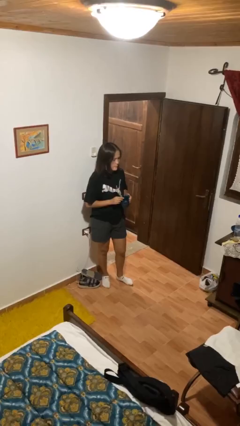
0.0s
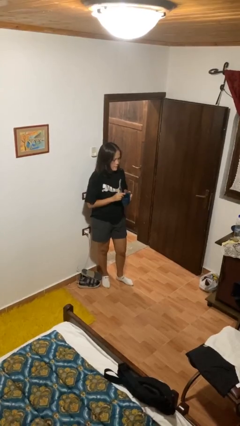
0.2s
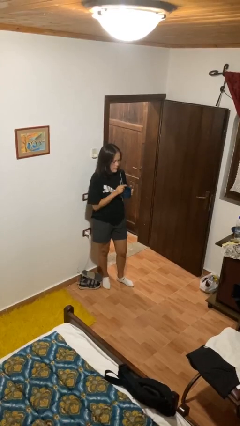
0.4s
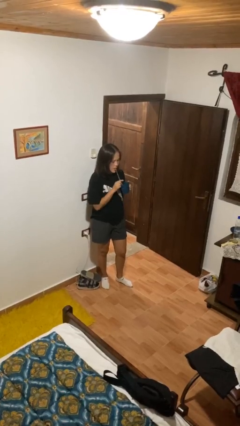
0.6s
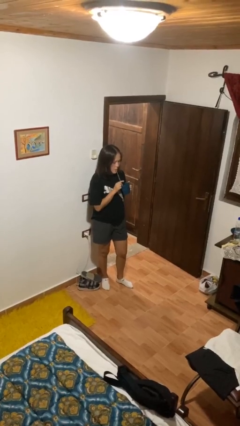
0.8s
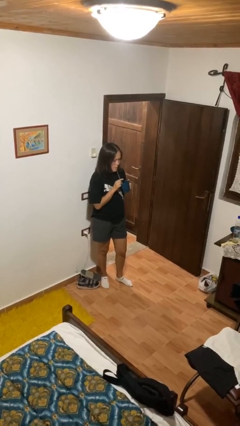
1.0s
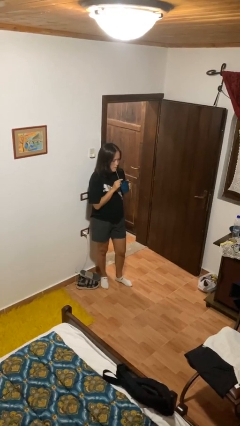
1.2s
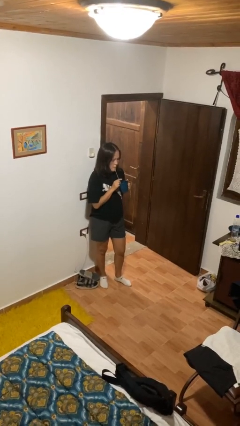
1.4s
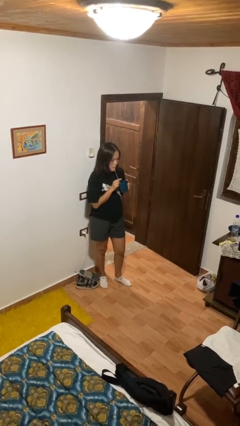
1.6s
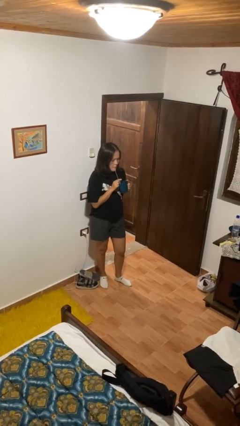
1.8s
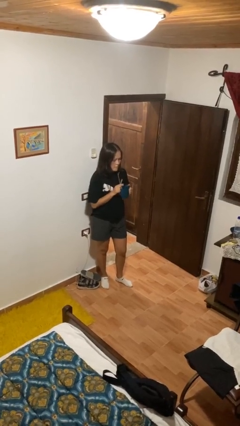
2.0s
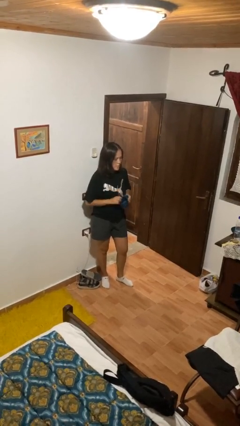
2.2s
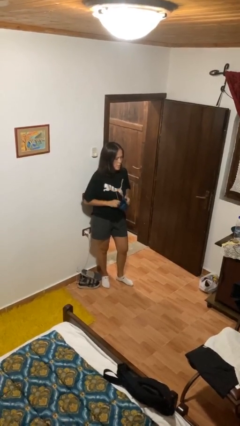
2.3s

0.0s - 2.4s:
person drinks from straw

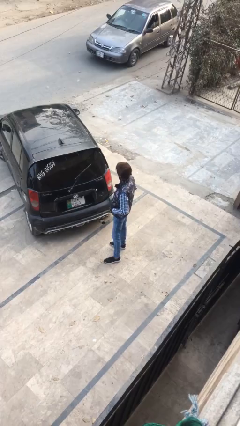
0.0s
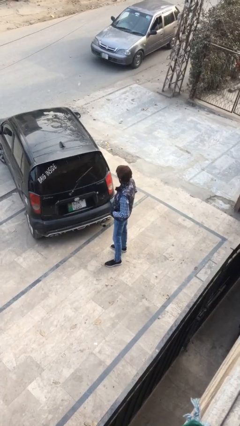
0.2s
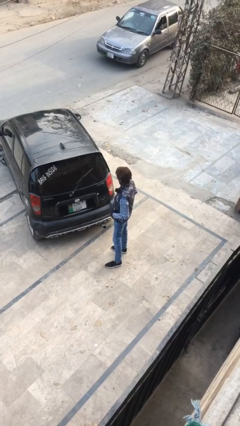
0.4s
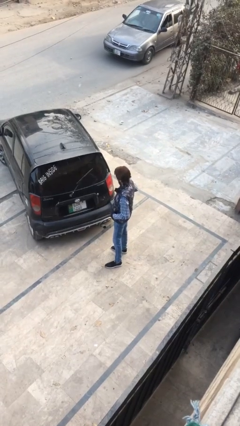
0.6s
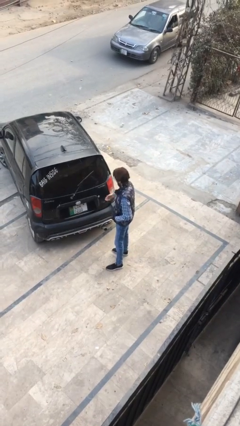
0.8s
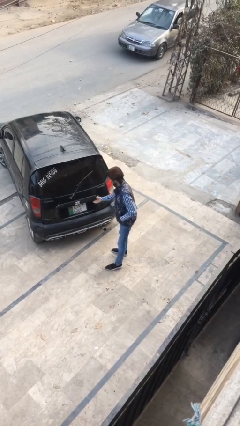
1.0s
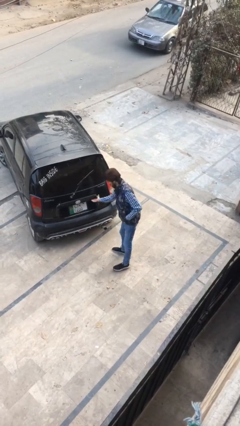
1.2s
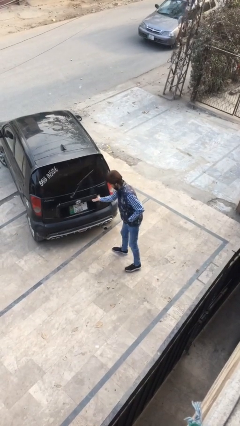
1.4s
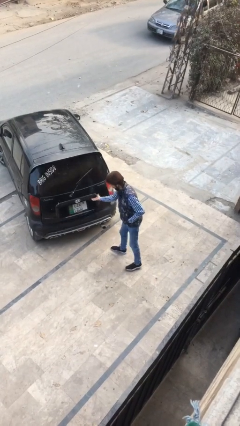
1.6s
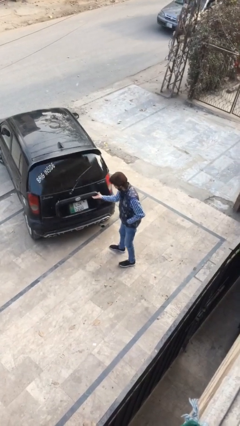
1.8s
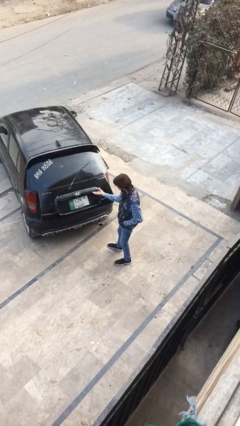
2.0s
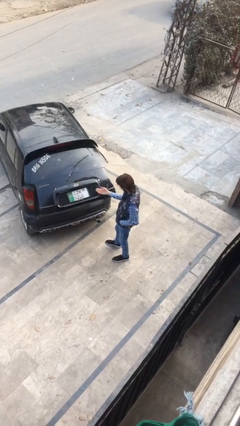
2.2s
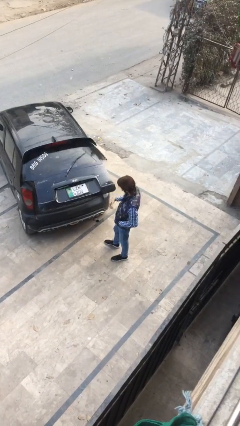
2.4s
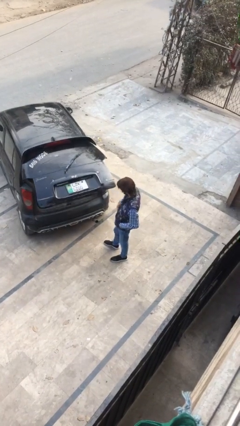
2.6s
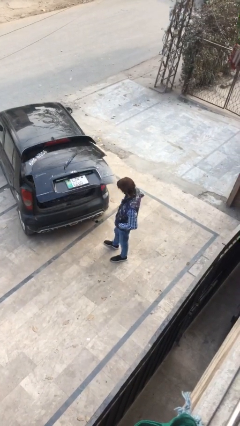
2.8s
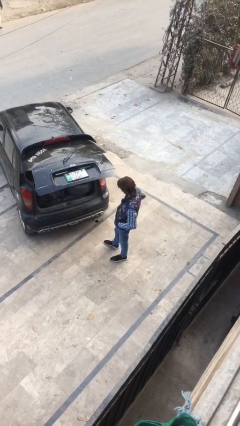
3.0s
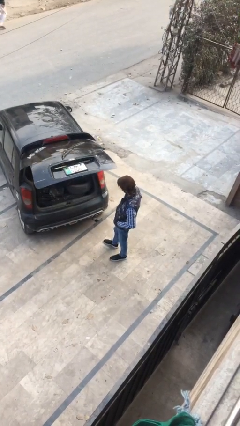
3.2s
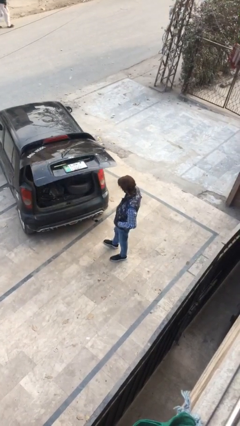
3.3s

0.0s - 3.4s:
person opens car trunk

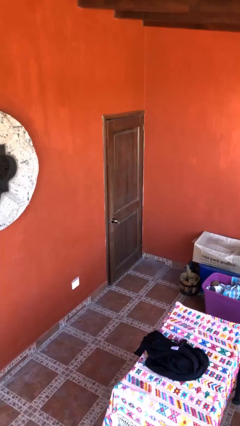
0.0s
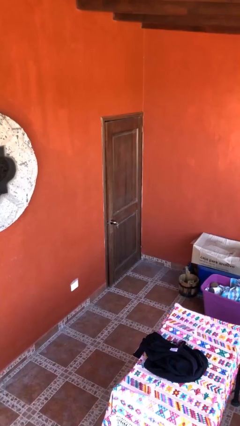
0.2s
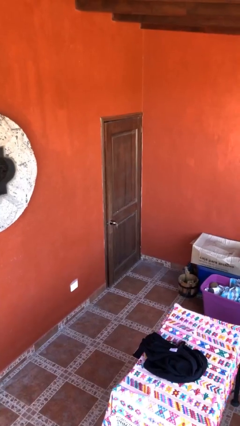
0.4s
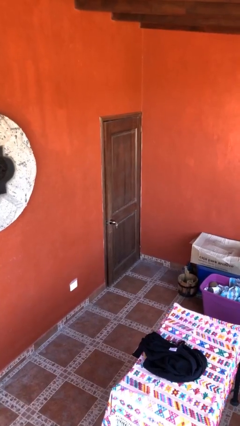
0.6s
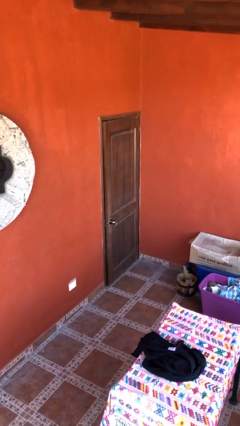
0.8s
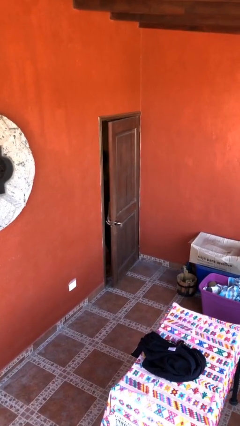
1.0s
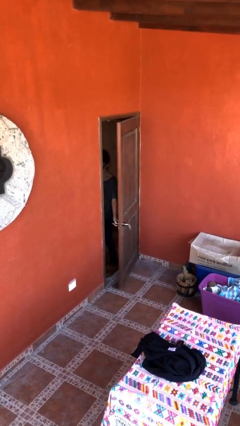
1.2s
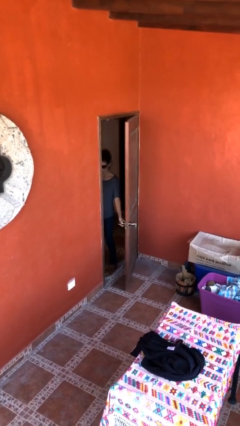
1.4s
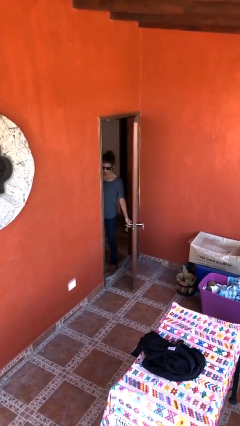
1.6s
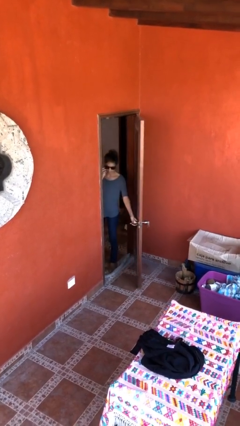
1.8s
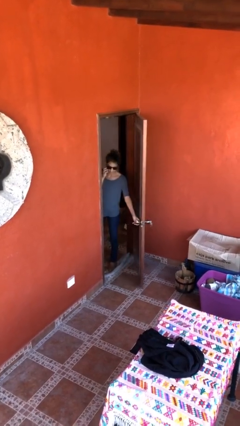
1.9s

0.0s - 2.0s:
person opens facility door

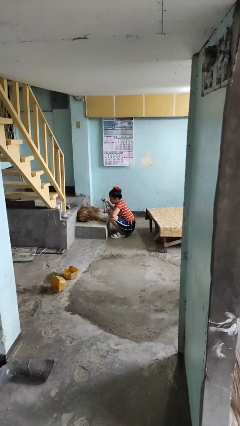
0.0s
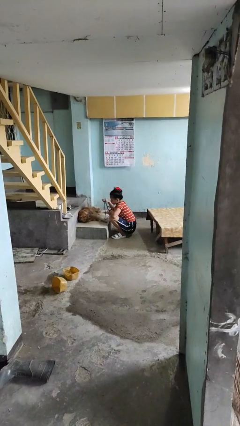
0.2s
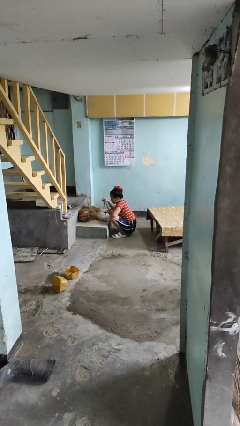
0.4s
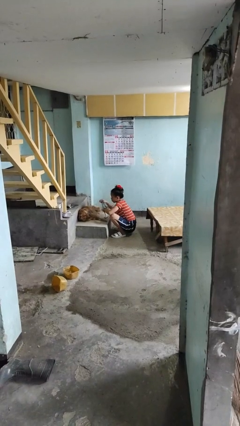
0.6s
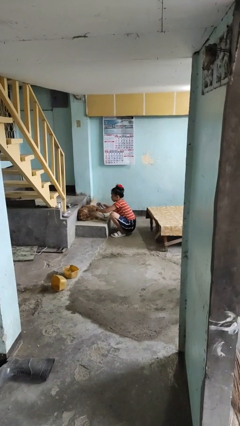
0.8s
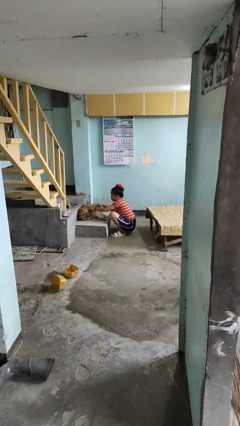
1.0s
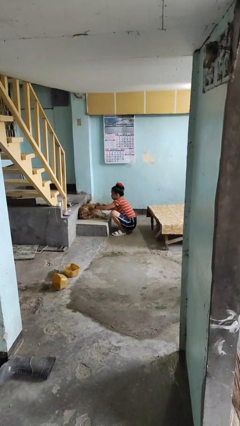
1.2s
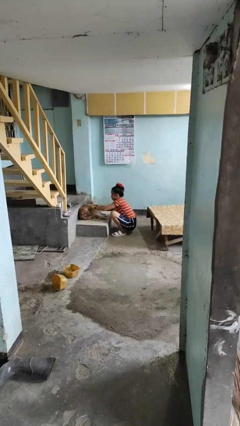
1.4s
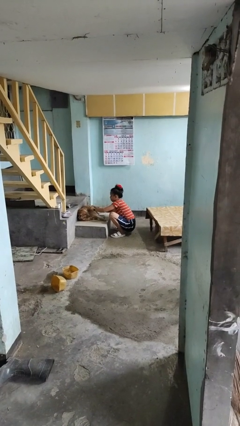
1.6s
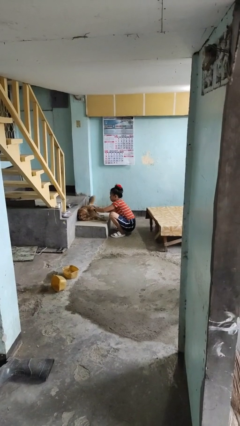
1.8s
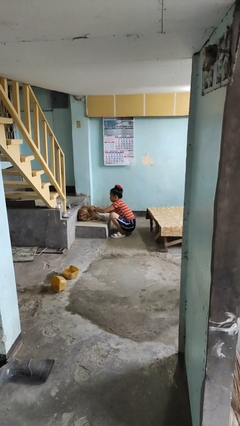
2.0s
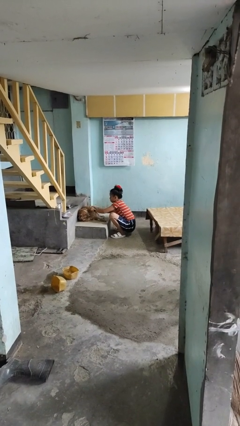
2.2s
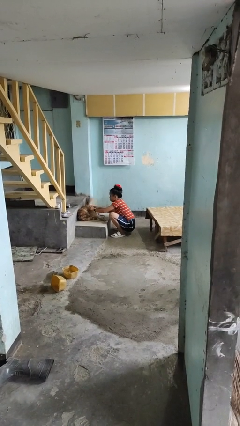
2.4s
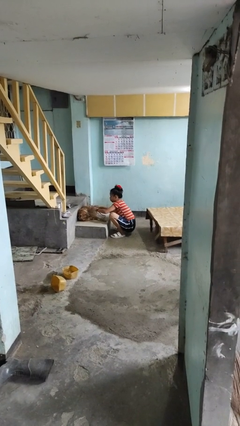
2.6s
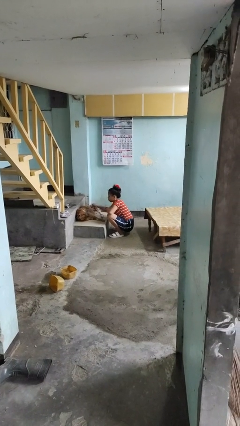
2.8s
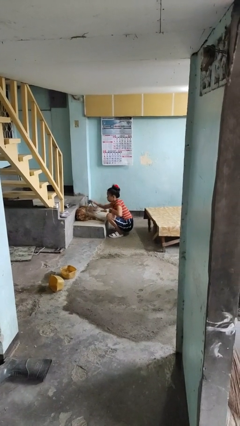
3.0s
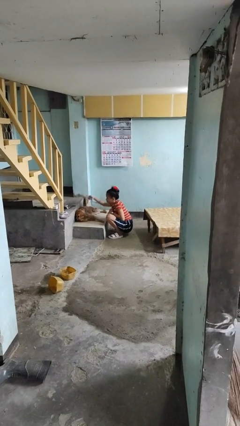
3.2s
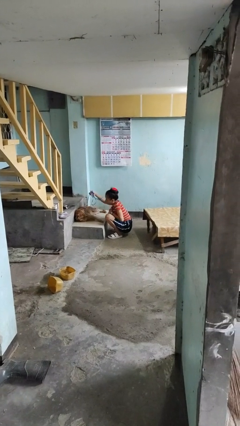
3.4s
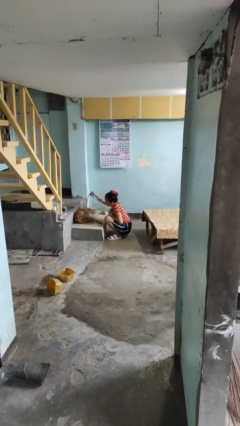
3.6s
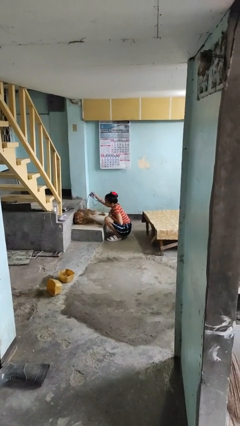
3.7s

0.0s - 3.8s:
person attaches leash to dog

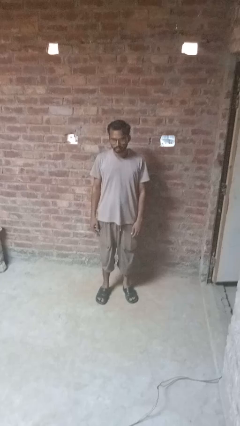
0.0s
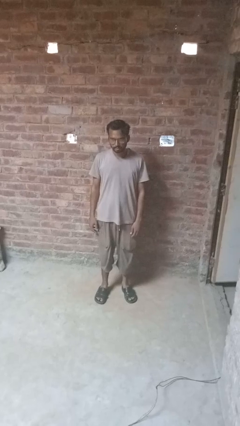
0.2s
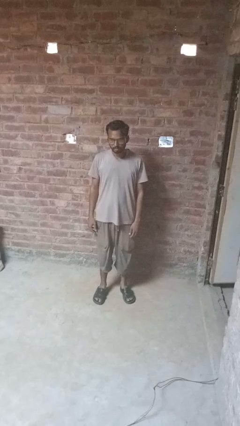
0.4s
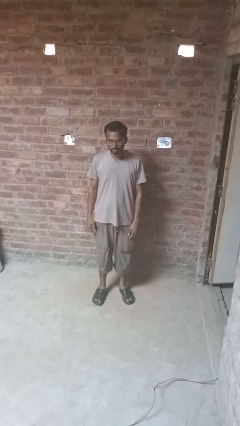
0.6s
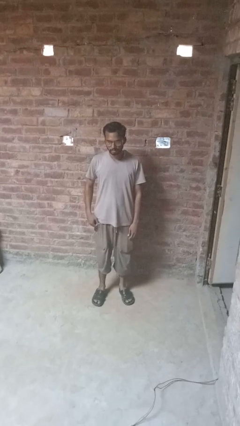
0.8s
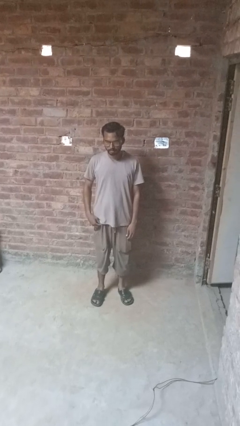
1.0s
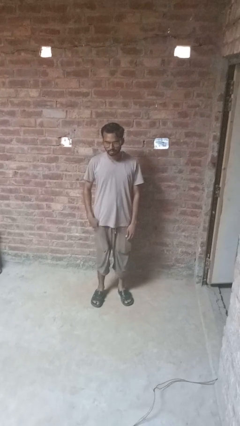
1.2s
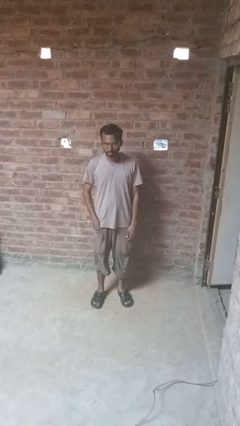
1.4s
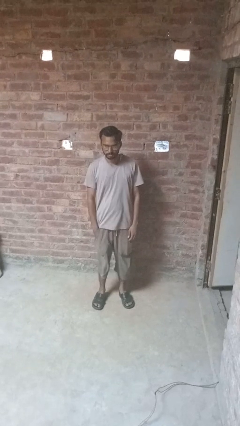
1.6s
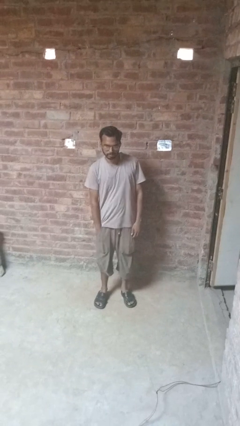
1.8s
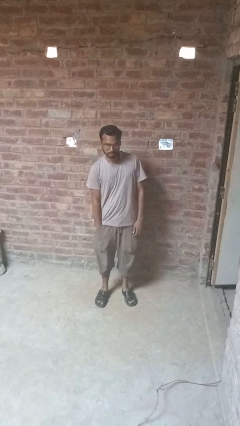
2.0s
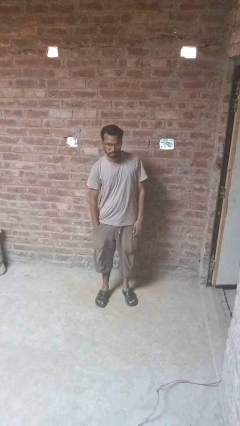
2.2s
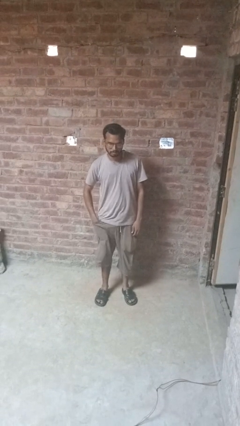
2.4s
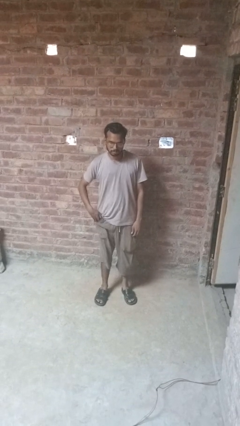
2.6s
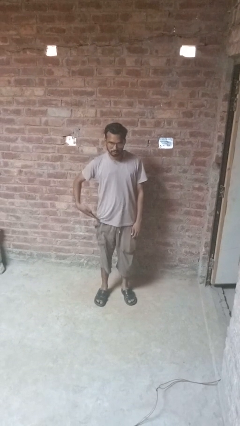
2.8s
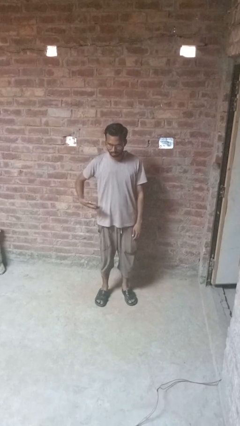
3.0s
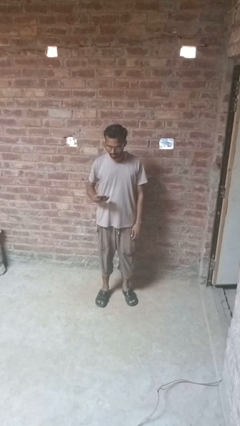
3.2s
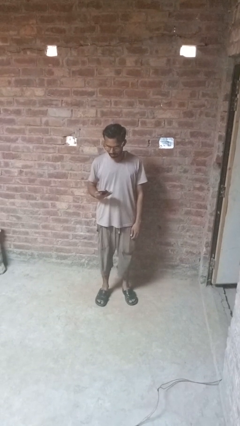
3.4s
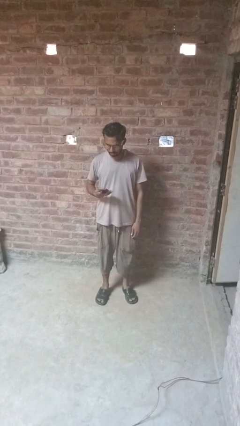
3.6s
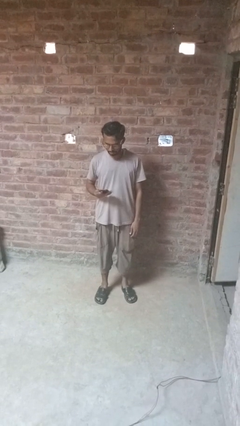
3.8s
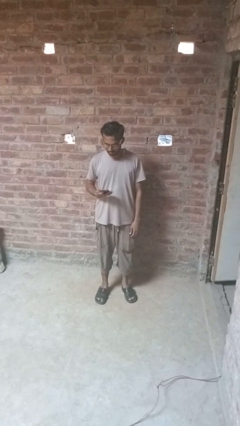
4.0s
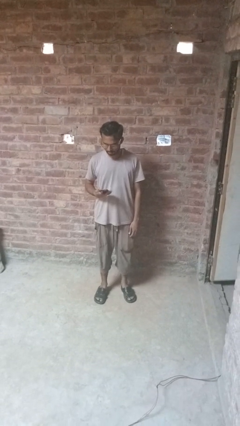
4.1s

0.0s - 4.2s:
person takes phone from pocket

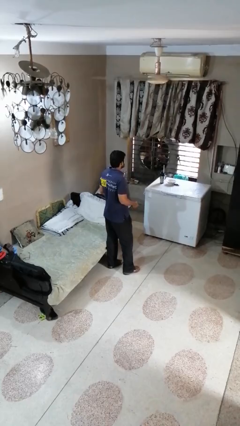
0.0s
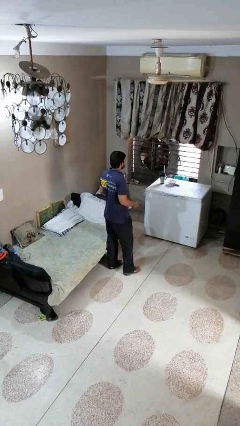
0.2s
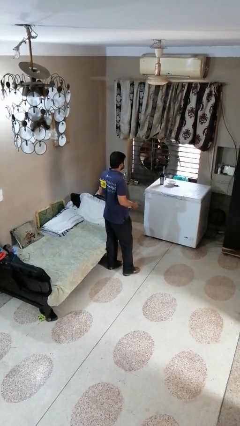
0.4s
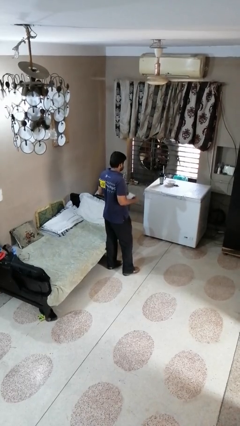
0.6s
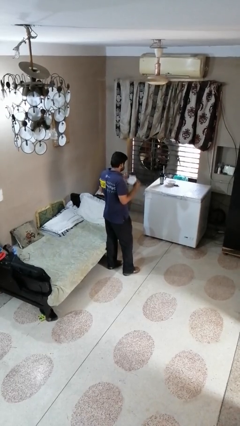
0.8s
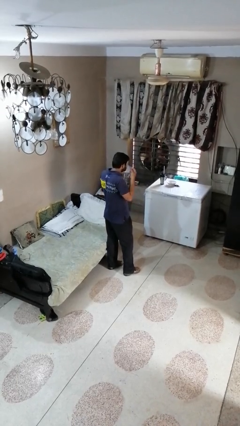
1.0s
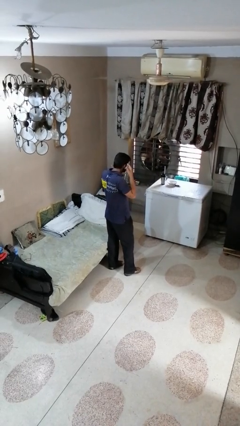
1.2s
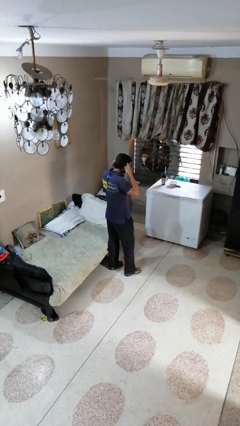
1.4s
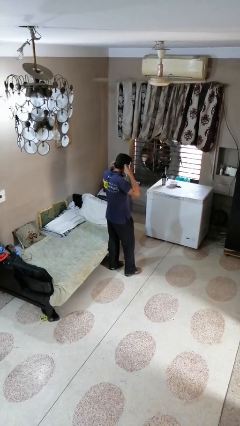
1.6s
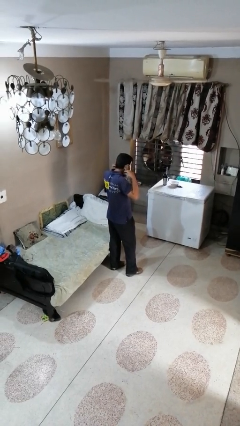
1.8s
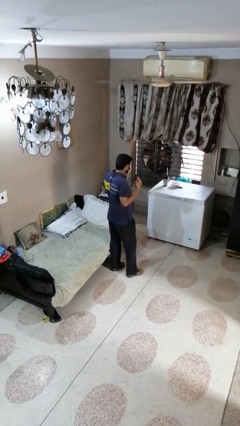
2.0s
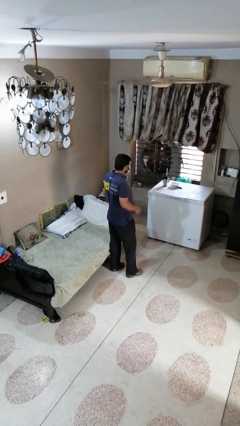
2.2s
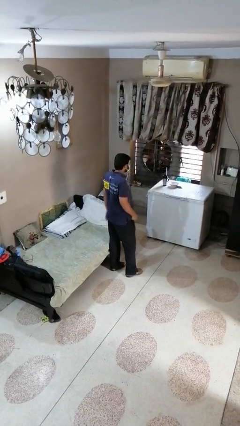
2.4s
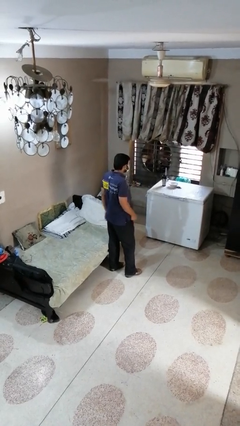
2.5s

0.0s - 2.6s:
person puts on facemask
